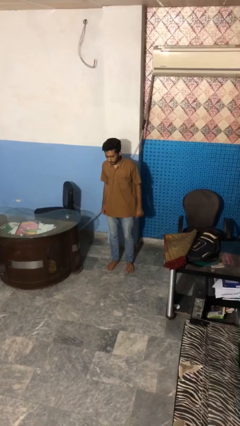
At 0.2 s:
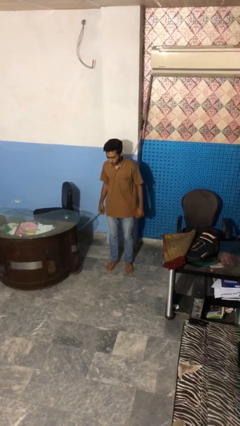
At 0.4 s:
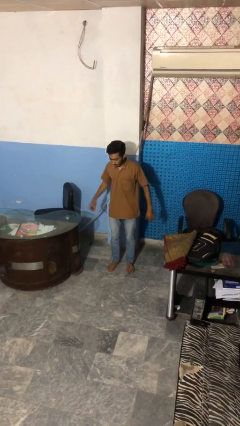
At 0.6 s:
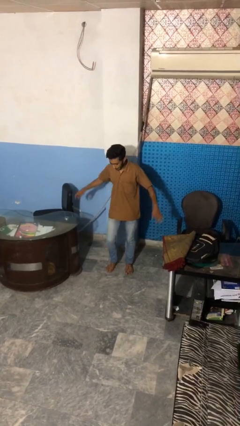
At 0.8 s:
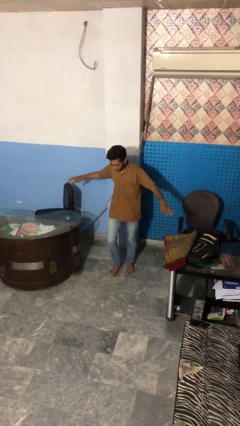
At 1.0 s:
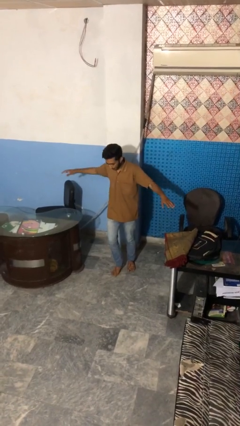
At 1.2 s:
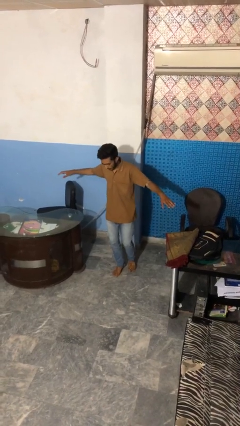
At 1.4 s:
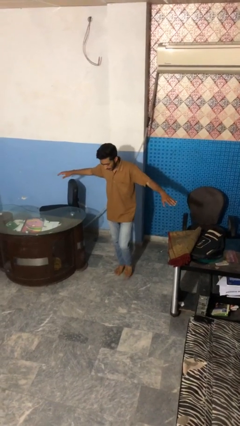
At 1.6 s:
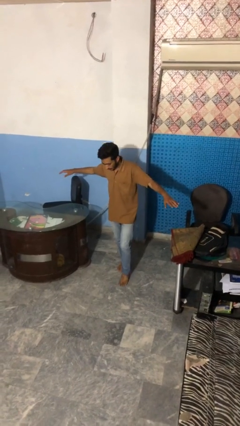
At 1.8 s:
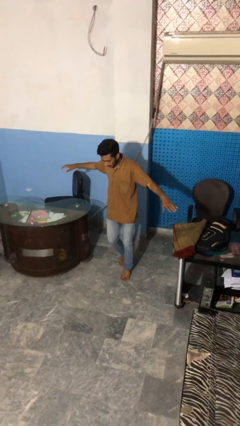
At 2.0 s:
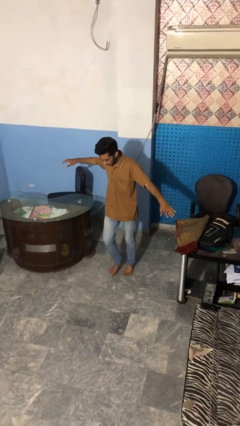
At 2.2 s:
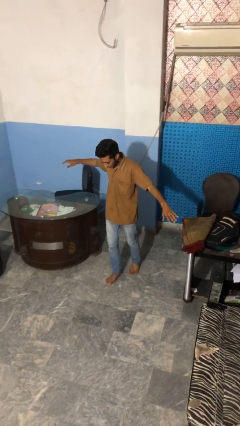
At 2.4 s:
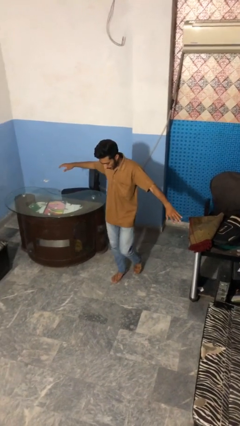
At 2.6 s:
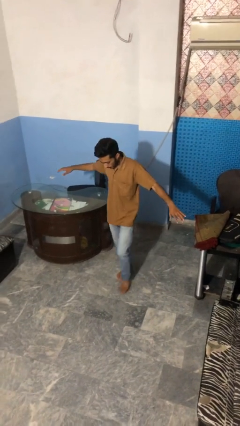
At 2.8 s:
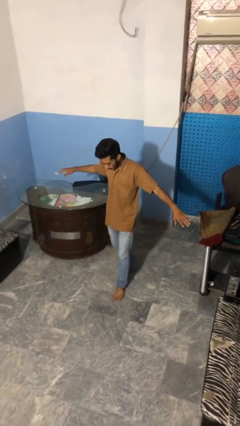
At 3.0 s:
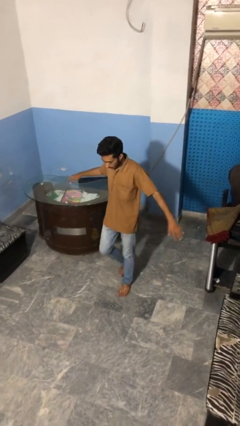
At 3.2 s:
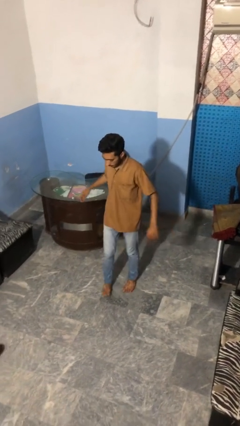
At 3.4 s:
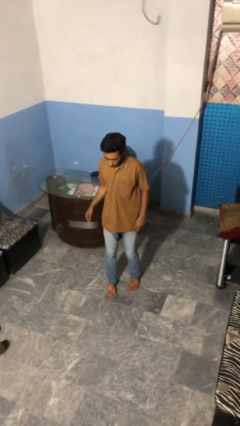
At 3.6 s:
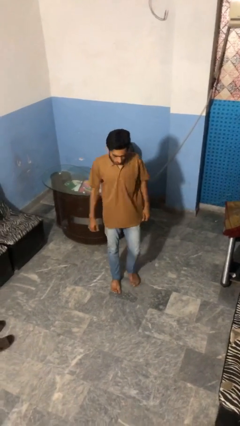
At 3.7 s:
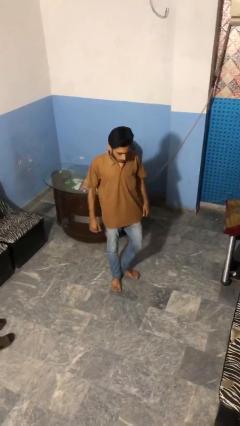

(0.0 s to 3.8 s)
person walks tiptoe

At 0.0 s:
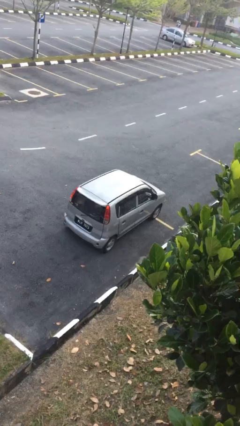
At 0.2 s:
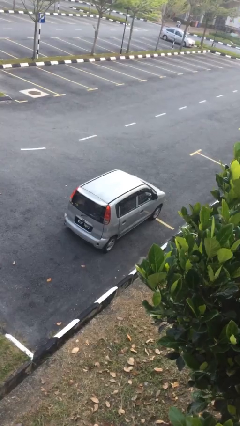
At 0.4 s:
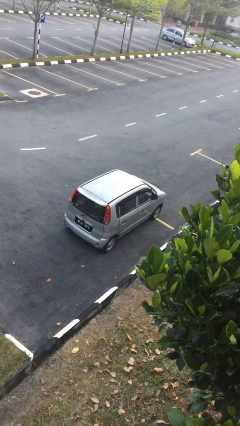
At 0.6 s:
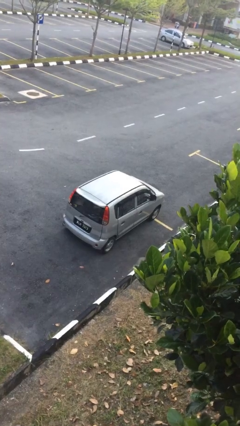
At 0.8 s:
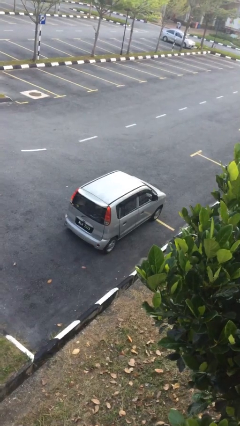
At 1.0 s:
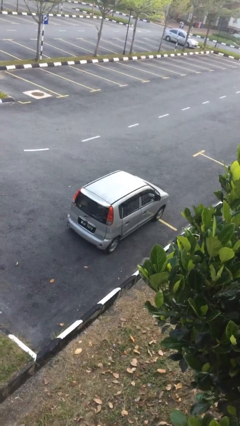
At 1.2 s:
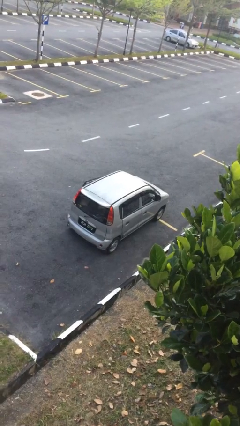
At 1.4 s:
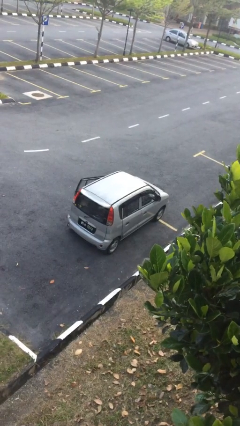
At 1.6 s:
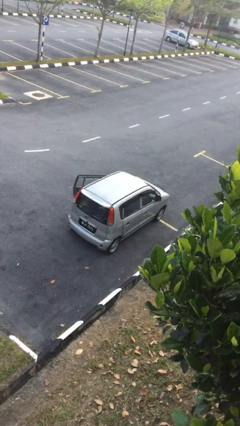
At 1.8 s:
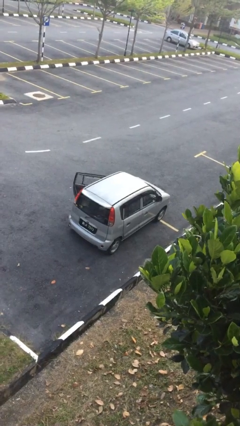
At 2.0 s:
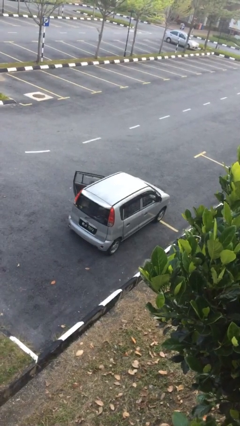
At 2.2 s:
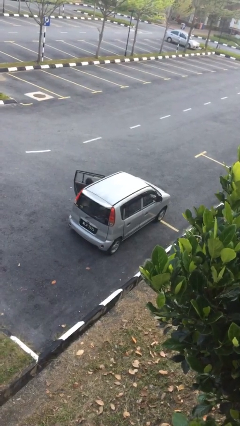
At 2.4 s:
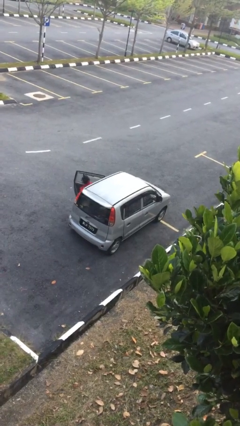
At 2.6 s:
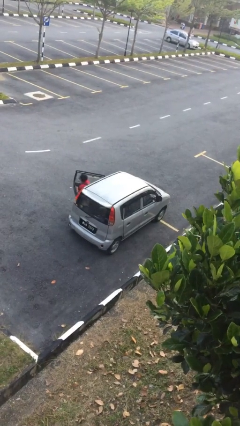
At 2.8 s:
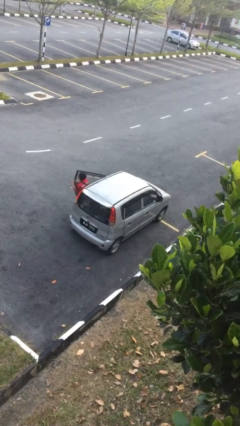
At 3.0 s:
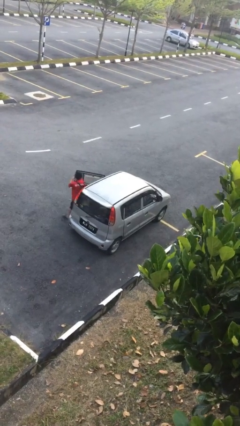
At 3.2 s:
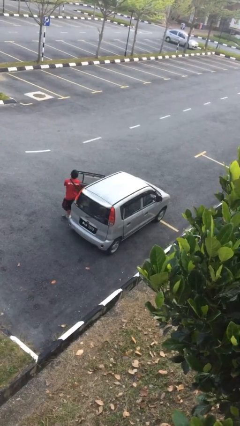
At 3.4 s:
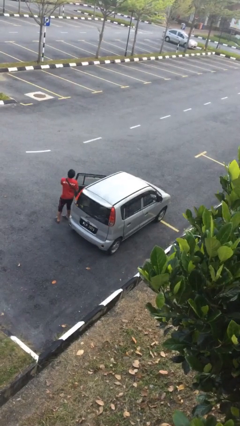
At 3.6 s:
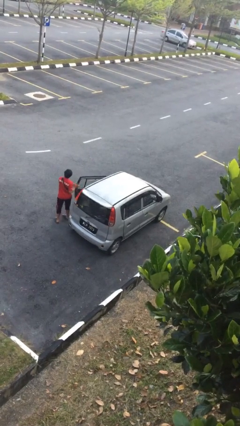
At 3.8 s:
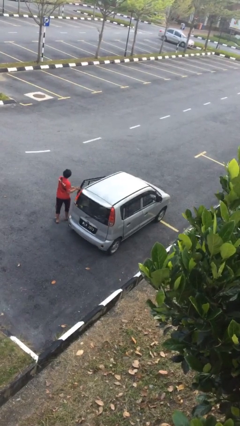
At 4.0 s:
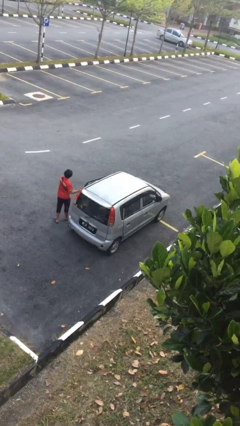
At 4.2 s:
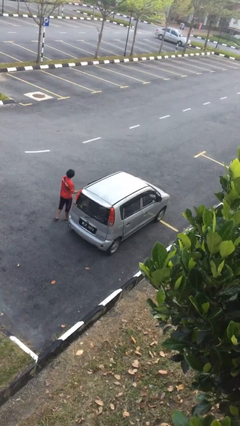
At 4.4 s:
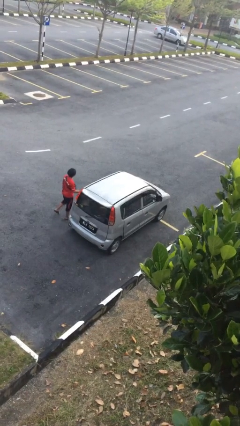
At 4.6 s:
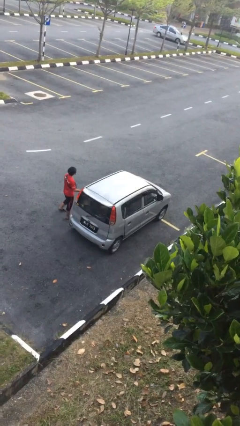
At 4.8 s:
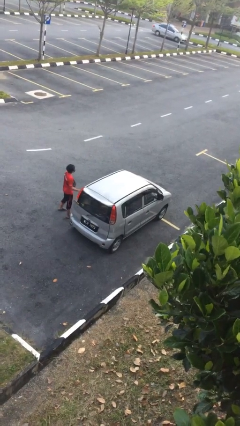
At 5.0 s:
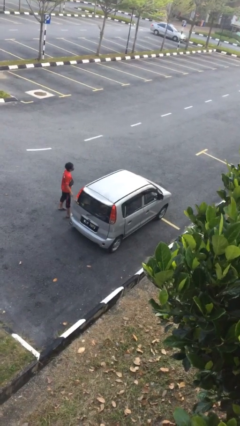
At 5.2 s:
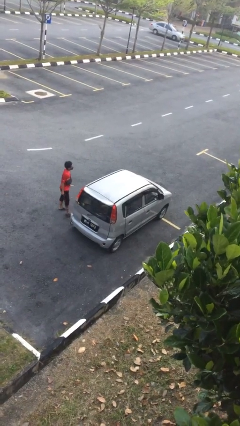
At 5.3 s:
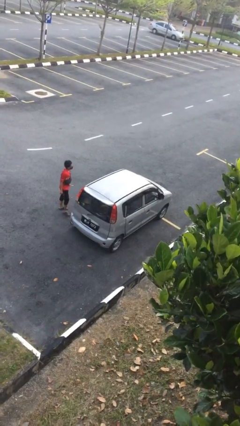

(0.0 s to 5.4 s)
car drops off person

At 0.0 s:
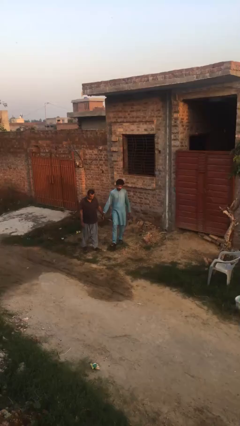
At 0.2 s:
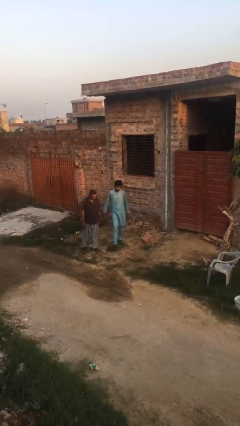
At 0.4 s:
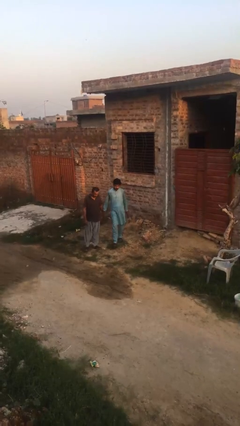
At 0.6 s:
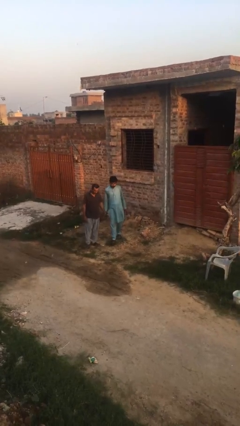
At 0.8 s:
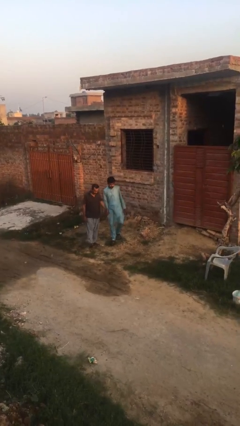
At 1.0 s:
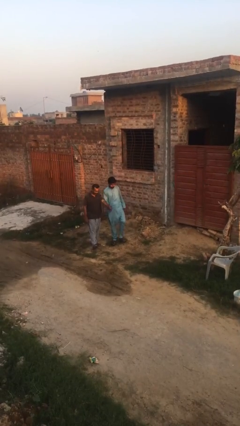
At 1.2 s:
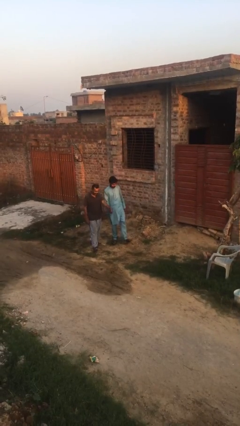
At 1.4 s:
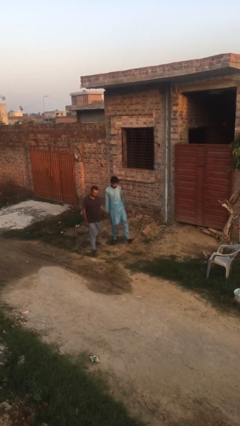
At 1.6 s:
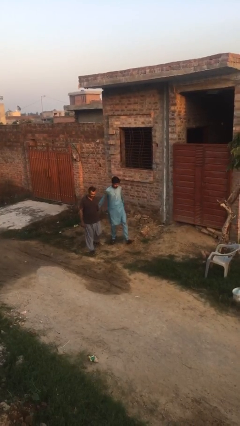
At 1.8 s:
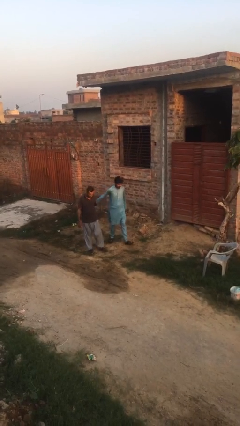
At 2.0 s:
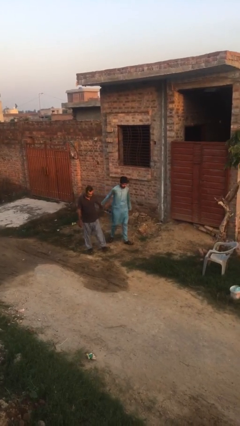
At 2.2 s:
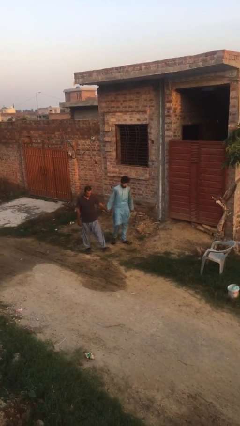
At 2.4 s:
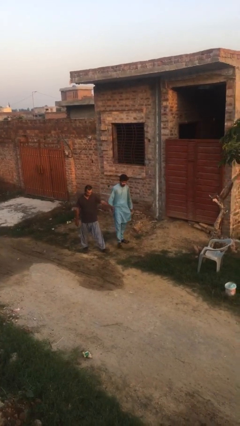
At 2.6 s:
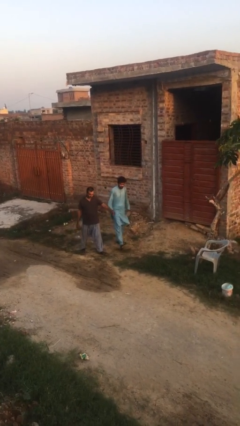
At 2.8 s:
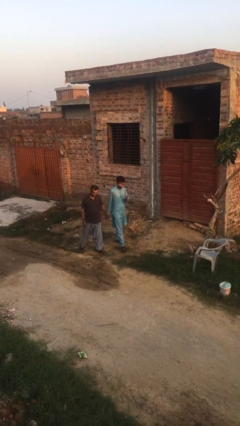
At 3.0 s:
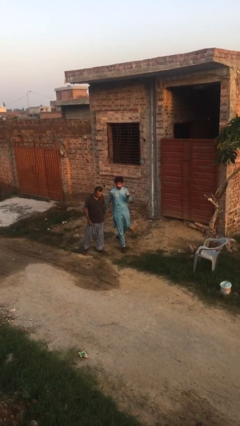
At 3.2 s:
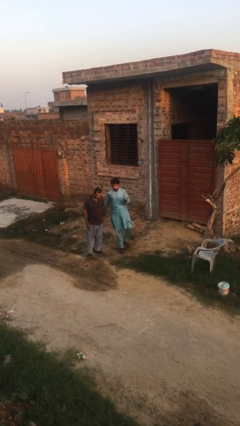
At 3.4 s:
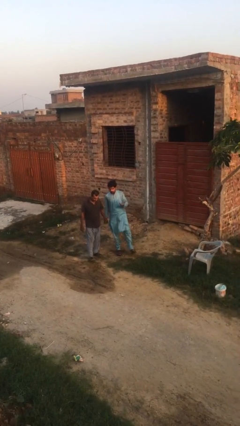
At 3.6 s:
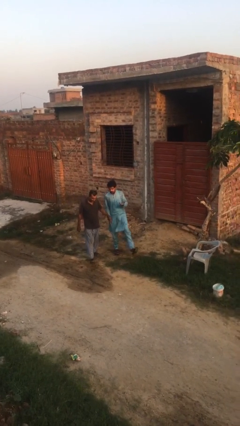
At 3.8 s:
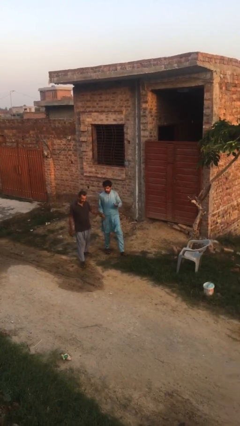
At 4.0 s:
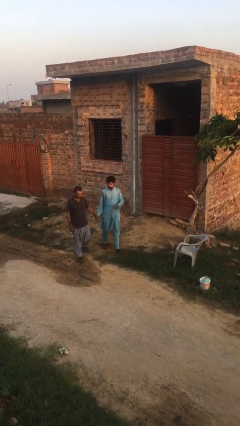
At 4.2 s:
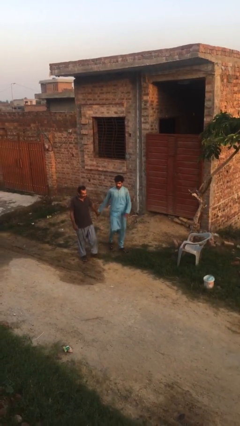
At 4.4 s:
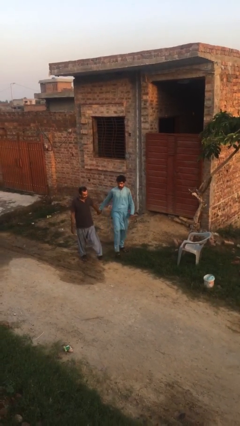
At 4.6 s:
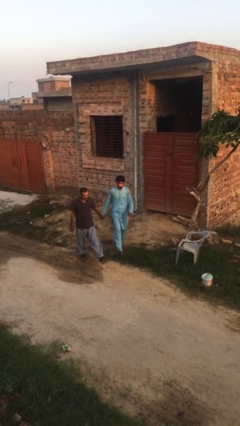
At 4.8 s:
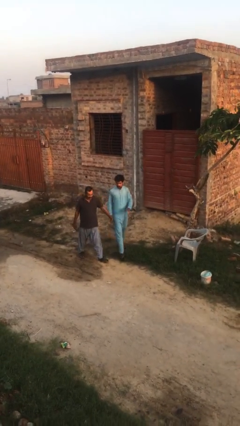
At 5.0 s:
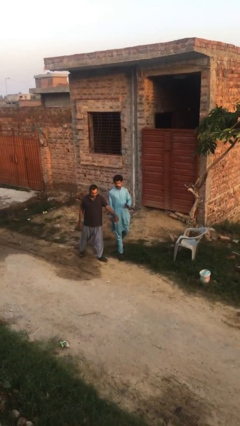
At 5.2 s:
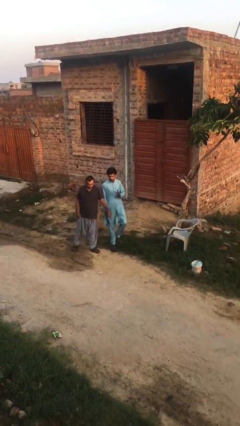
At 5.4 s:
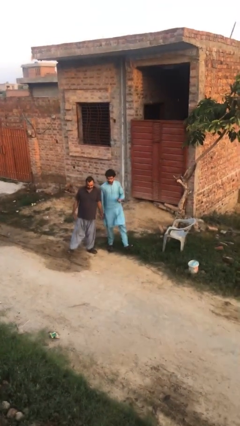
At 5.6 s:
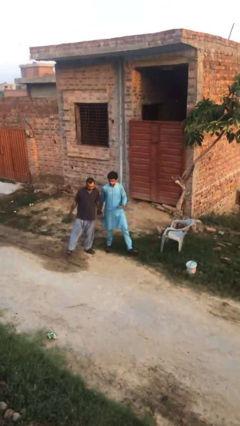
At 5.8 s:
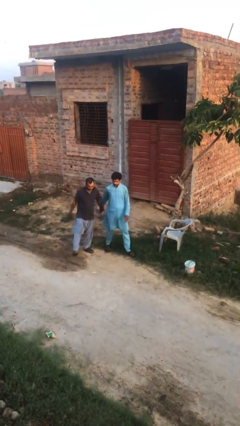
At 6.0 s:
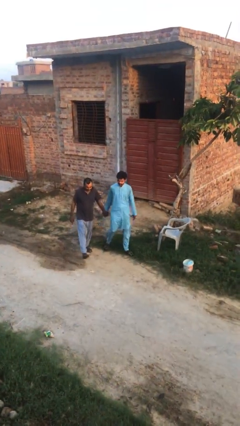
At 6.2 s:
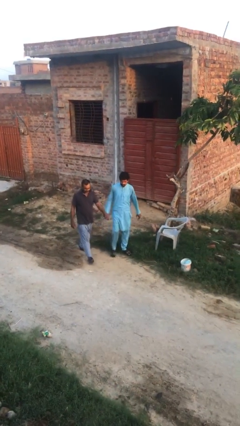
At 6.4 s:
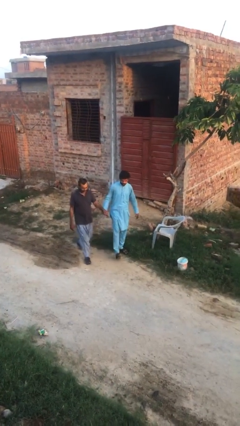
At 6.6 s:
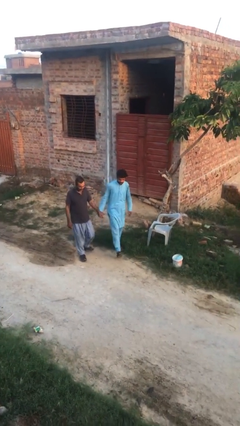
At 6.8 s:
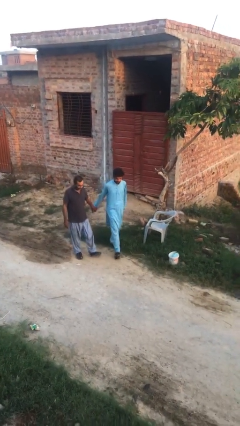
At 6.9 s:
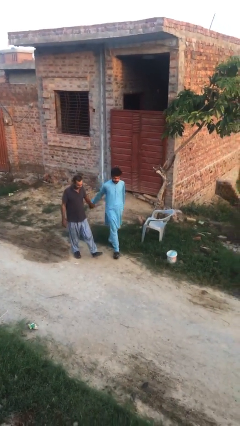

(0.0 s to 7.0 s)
person holds hand

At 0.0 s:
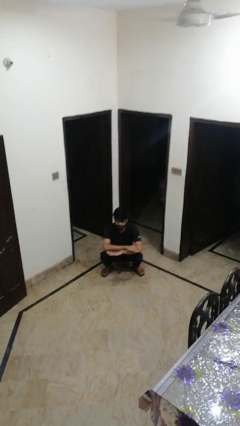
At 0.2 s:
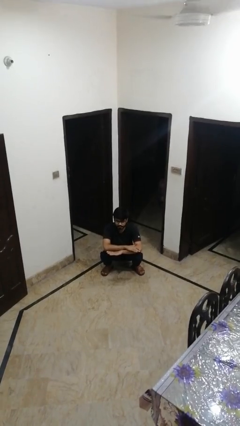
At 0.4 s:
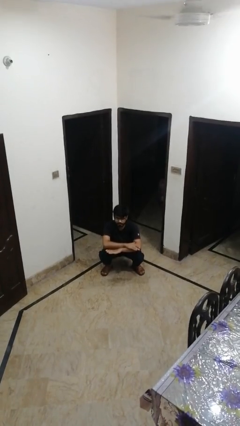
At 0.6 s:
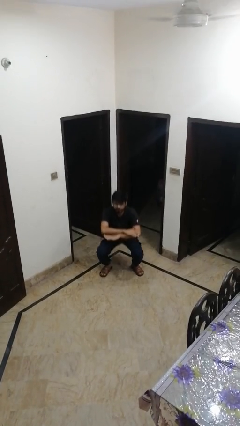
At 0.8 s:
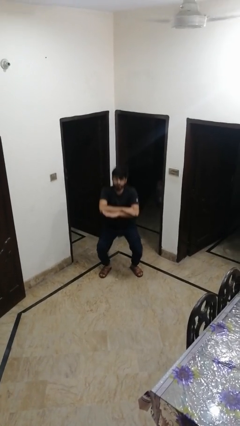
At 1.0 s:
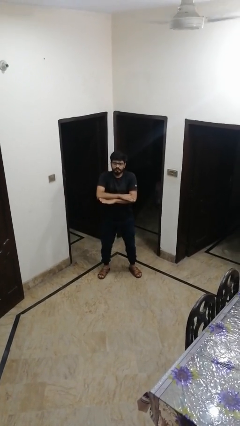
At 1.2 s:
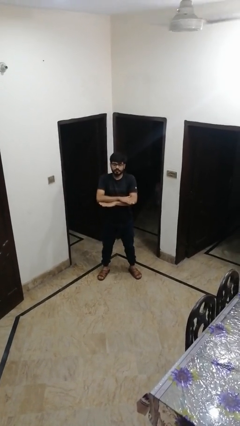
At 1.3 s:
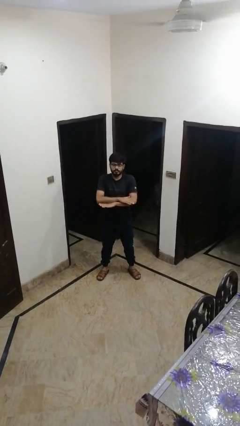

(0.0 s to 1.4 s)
person stands up

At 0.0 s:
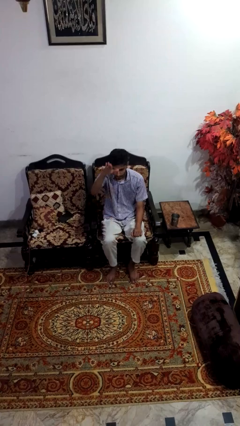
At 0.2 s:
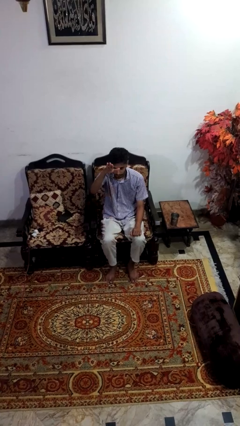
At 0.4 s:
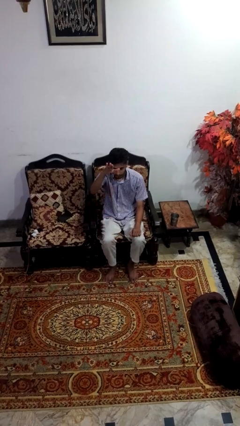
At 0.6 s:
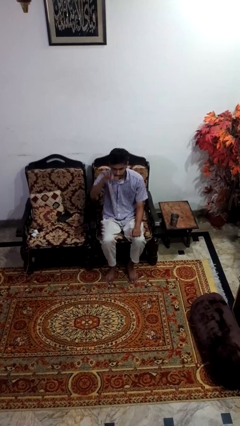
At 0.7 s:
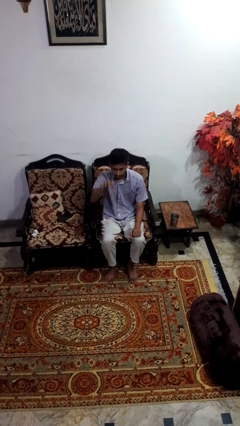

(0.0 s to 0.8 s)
person gestures swipe up
